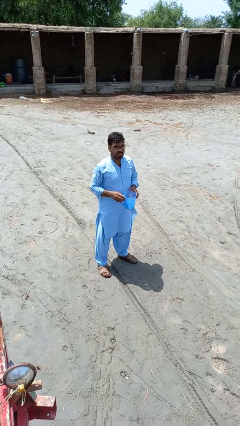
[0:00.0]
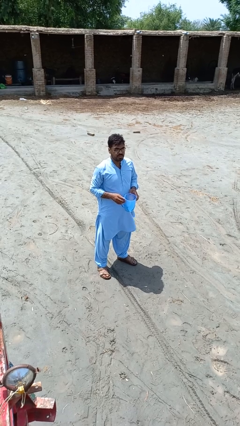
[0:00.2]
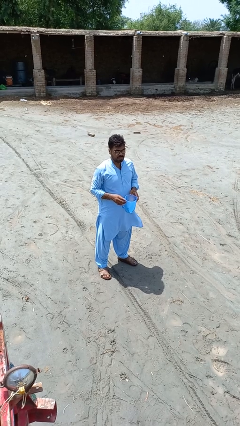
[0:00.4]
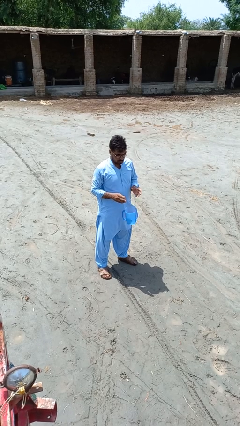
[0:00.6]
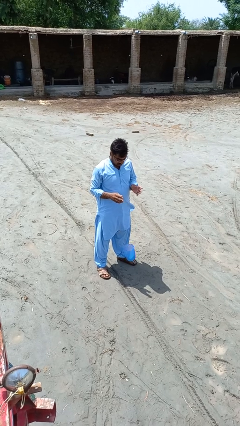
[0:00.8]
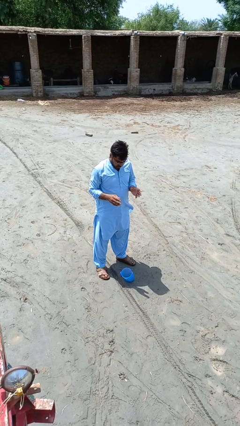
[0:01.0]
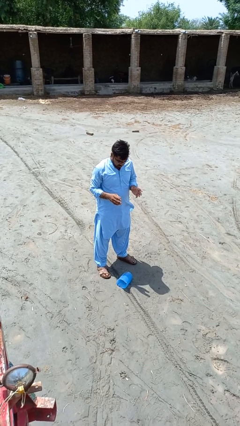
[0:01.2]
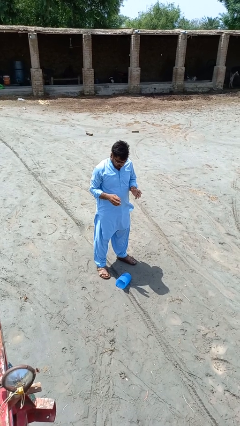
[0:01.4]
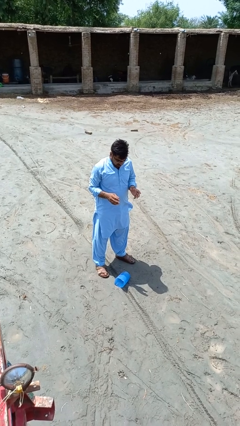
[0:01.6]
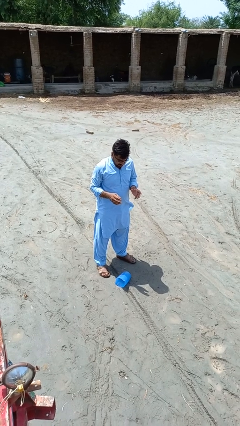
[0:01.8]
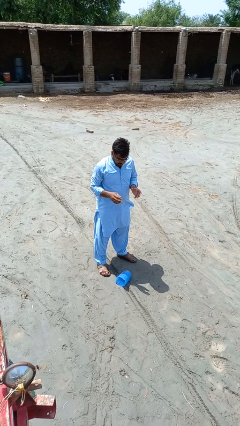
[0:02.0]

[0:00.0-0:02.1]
person drops object

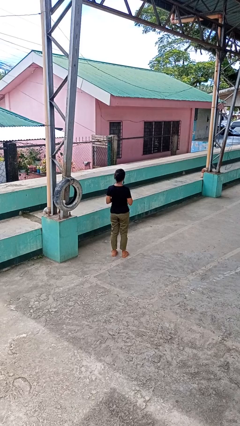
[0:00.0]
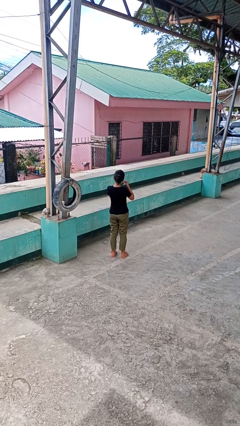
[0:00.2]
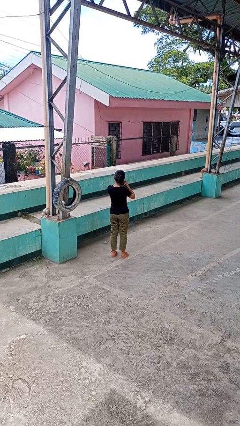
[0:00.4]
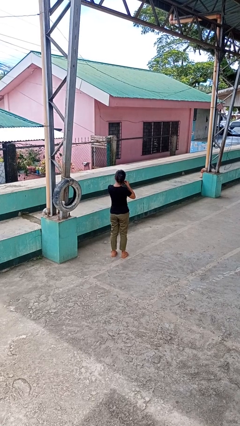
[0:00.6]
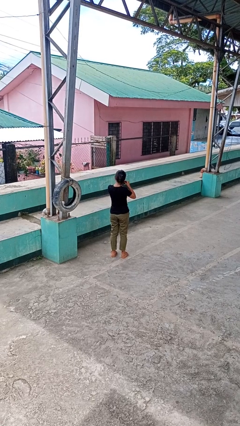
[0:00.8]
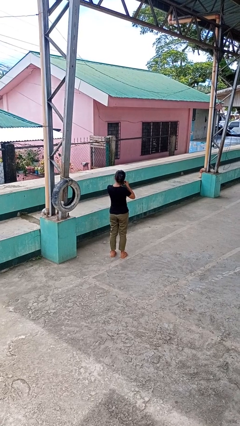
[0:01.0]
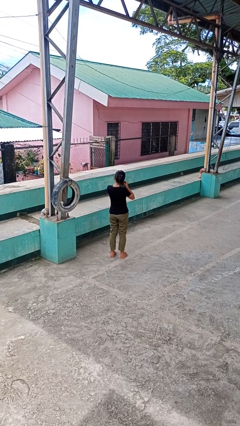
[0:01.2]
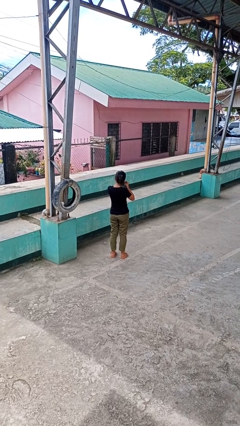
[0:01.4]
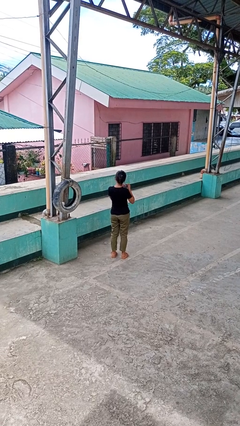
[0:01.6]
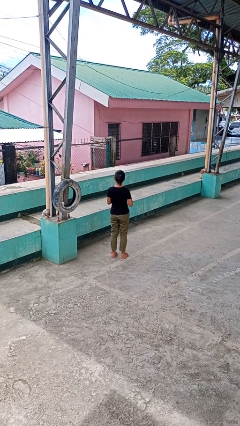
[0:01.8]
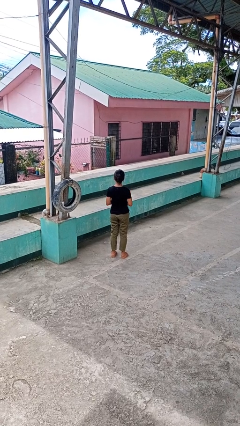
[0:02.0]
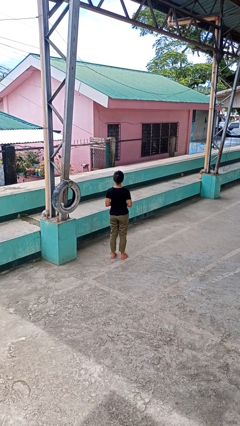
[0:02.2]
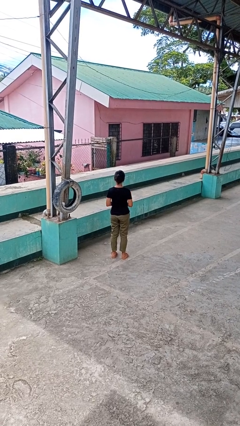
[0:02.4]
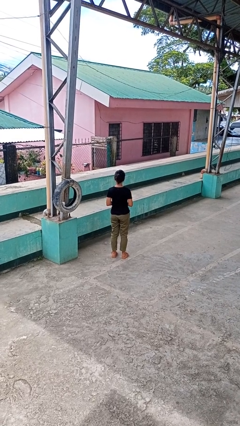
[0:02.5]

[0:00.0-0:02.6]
person takes off earrings

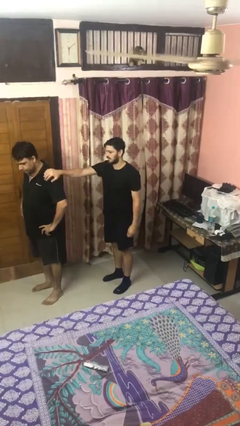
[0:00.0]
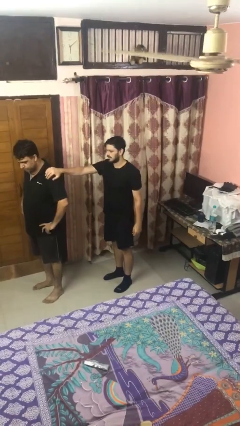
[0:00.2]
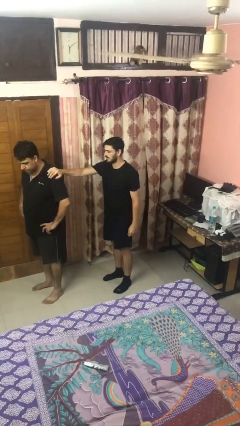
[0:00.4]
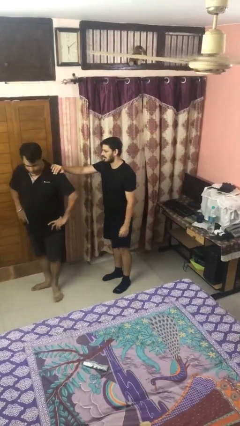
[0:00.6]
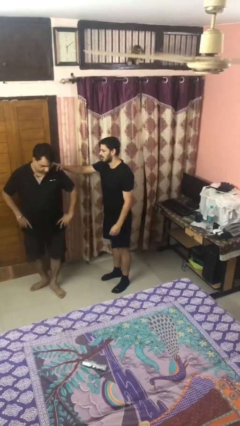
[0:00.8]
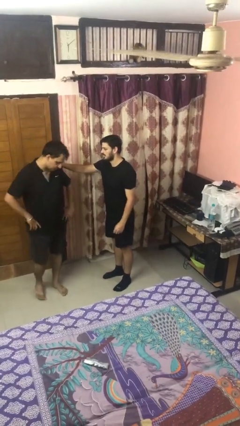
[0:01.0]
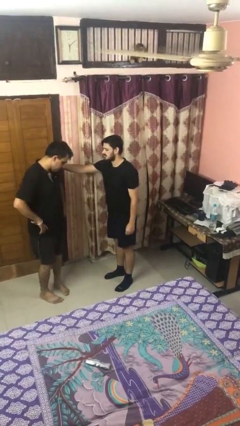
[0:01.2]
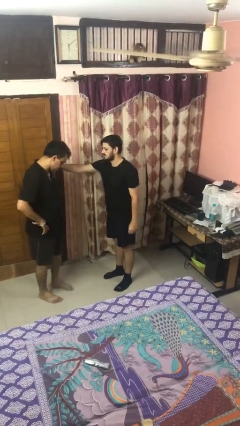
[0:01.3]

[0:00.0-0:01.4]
person spins person around

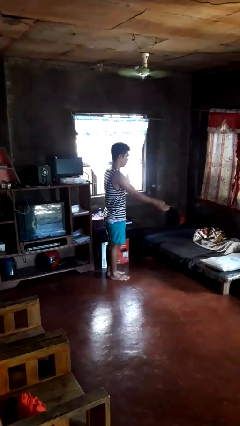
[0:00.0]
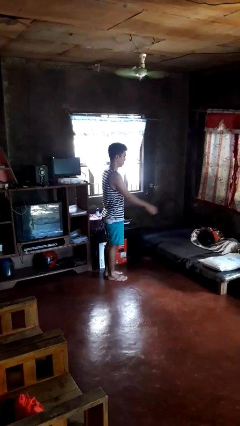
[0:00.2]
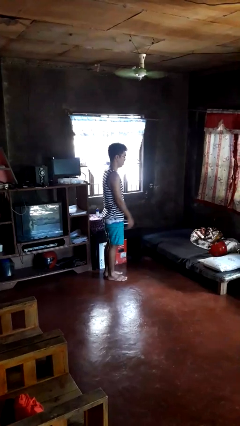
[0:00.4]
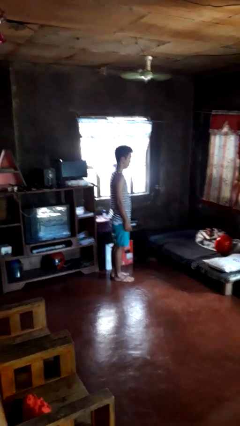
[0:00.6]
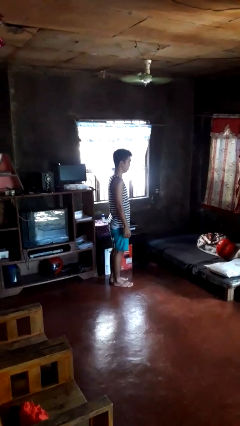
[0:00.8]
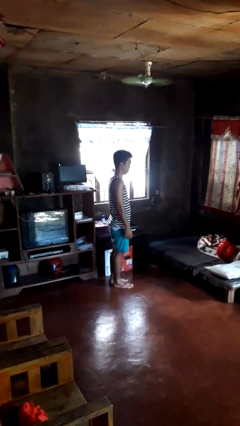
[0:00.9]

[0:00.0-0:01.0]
person throws object on bed

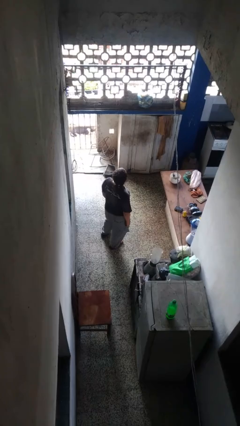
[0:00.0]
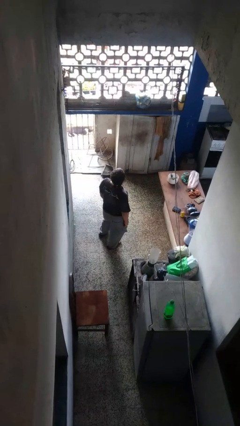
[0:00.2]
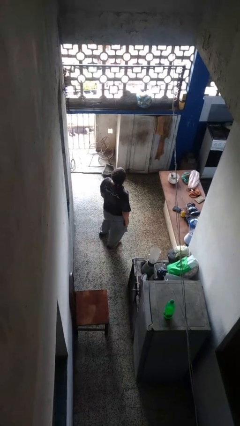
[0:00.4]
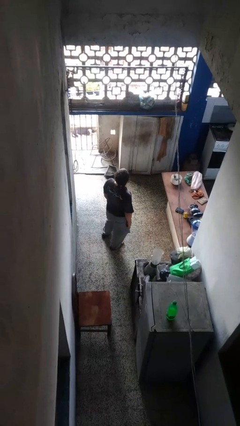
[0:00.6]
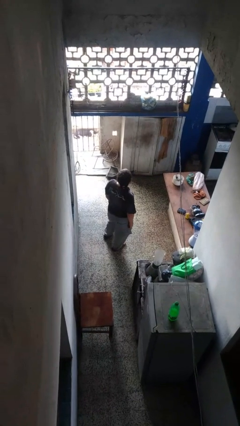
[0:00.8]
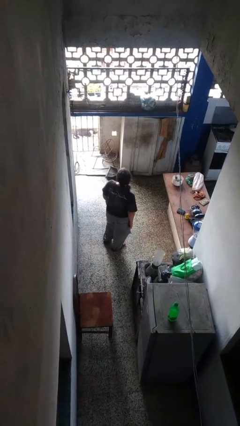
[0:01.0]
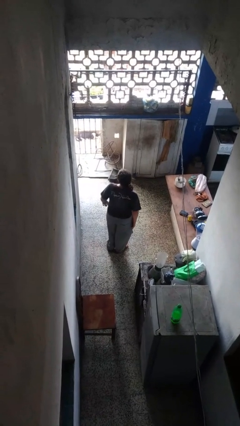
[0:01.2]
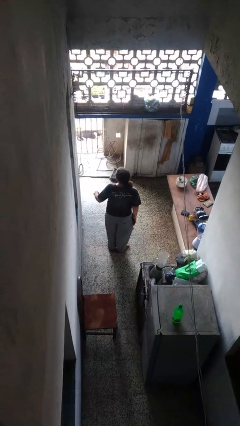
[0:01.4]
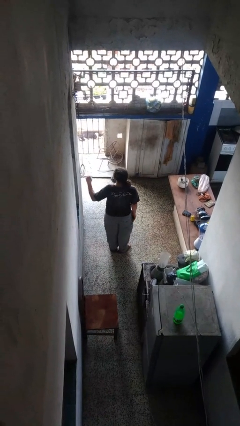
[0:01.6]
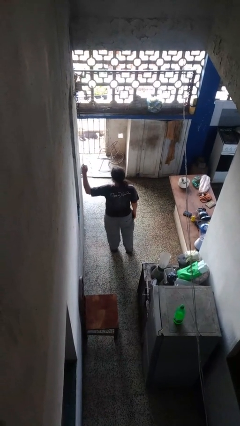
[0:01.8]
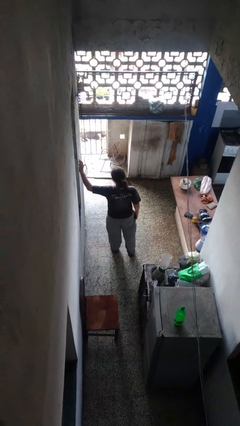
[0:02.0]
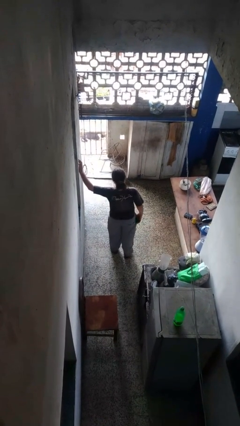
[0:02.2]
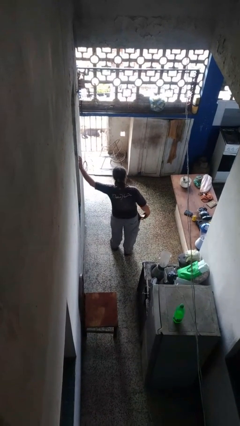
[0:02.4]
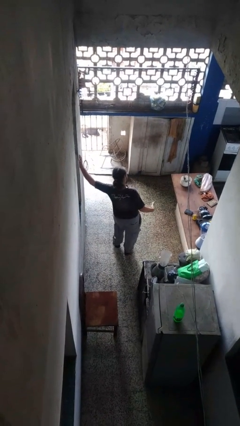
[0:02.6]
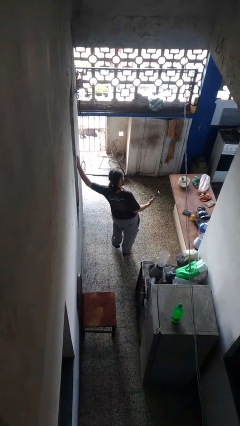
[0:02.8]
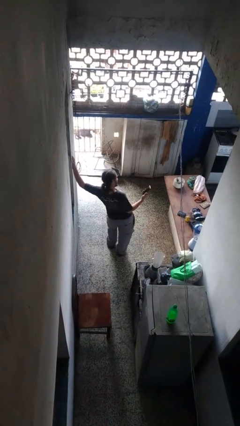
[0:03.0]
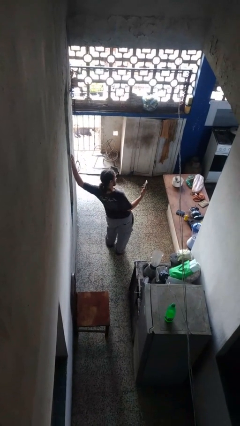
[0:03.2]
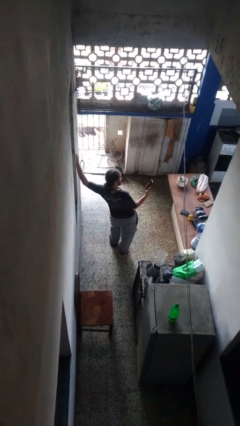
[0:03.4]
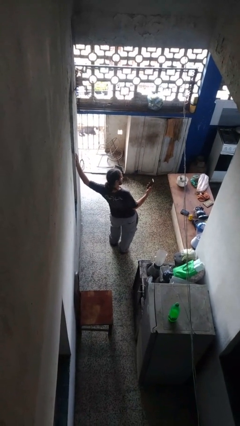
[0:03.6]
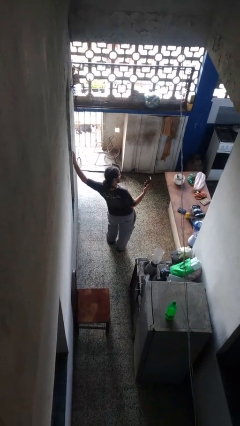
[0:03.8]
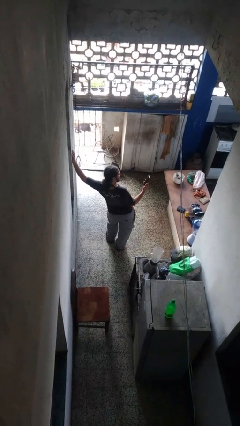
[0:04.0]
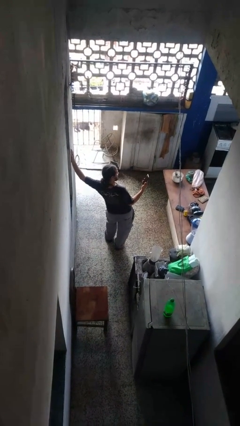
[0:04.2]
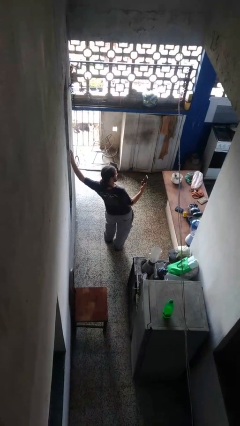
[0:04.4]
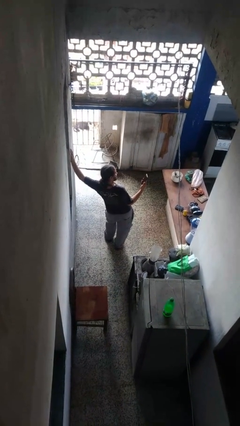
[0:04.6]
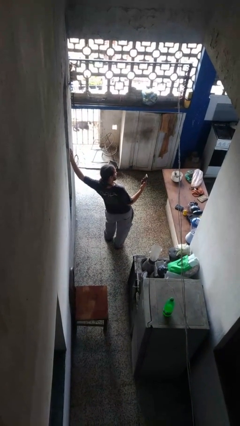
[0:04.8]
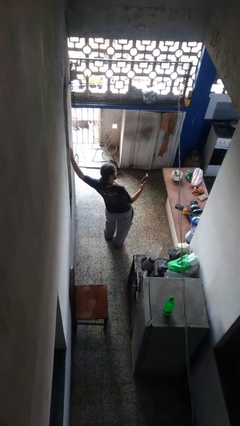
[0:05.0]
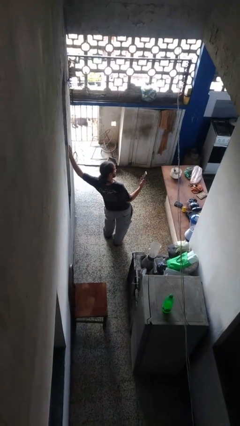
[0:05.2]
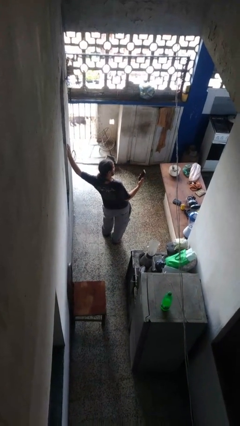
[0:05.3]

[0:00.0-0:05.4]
person takes phone from pocket

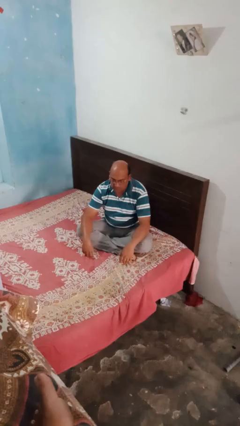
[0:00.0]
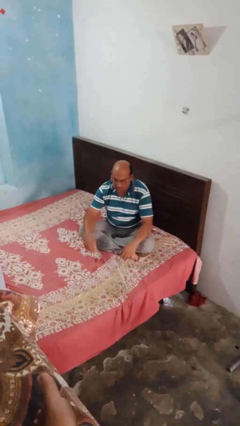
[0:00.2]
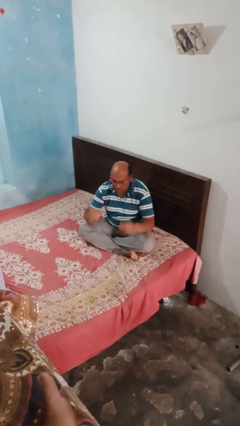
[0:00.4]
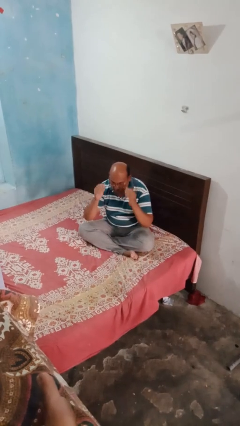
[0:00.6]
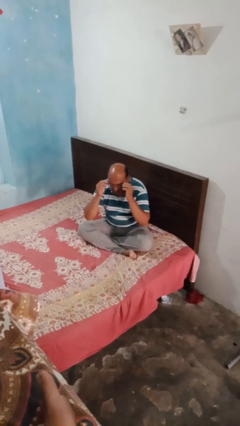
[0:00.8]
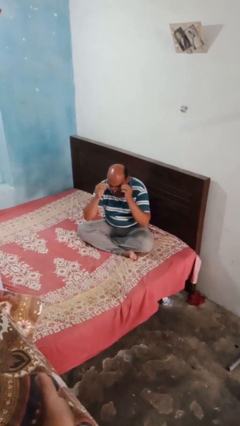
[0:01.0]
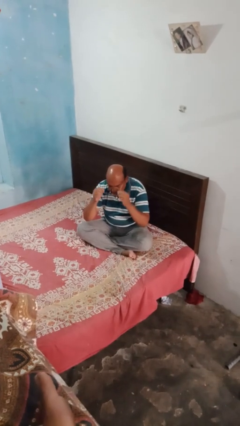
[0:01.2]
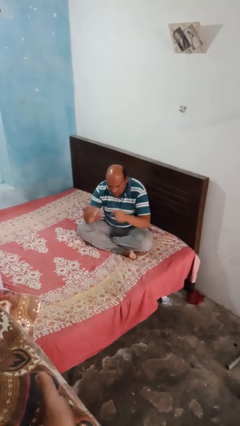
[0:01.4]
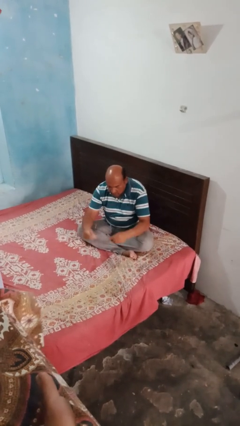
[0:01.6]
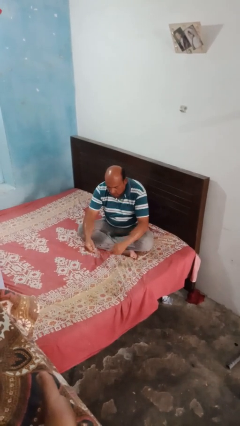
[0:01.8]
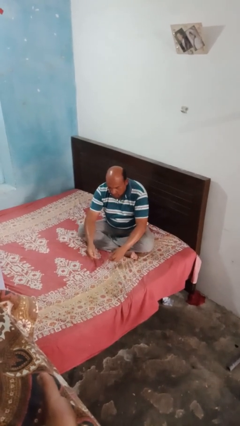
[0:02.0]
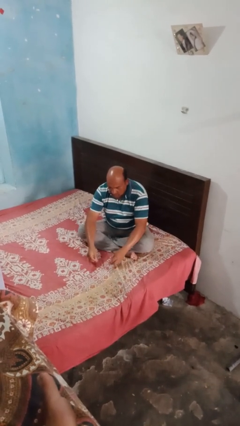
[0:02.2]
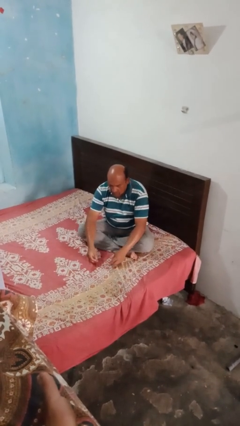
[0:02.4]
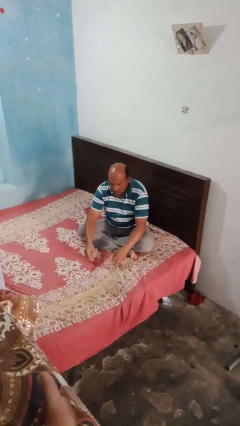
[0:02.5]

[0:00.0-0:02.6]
person takes off glasses

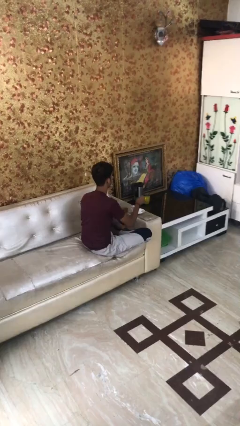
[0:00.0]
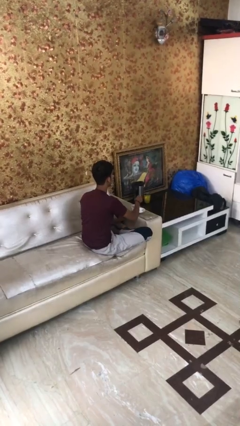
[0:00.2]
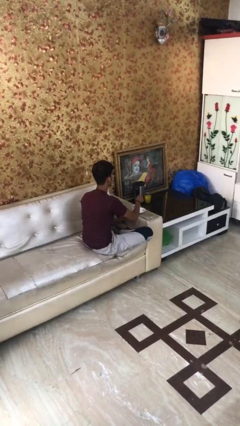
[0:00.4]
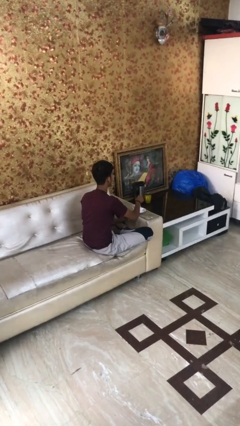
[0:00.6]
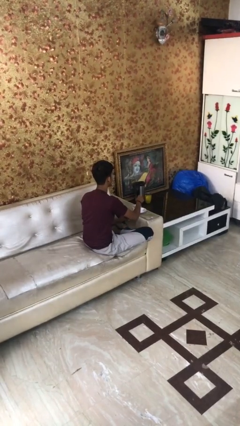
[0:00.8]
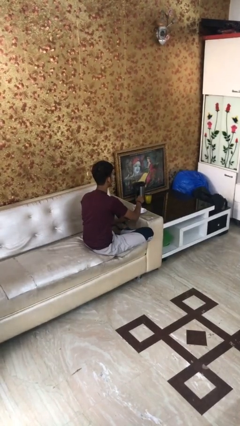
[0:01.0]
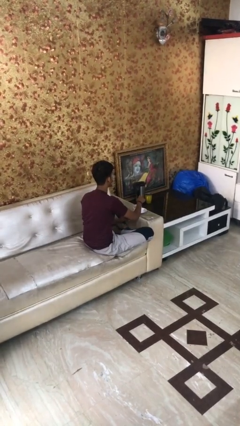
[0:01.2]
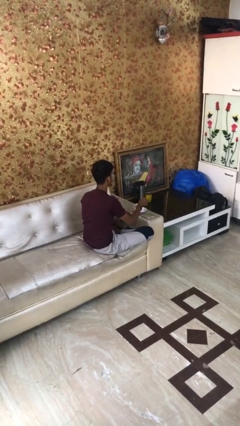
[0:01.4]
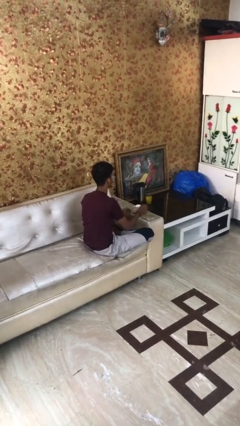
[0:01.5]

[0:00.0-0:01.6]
person stirs mug

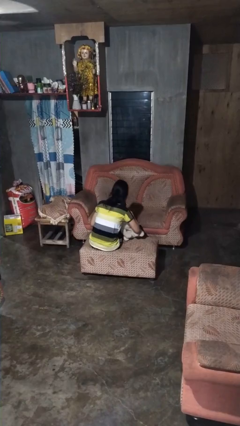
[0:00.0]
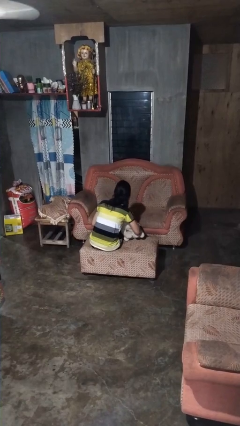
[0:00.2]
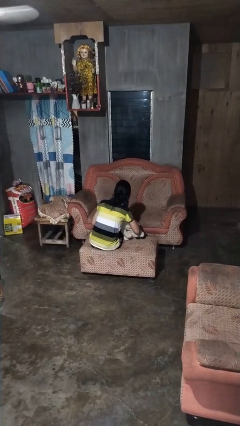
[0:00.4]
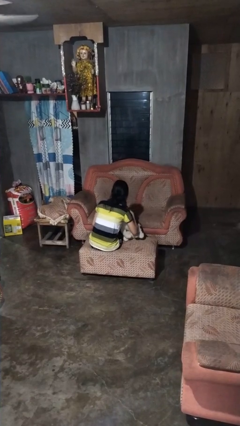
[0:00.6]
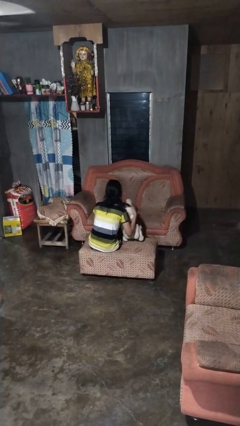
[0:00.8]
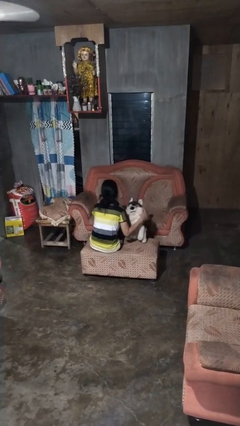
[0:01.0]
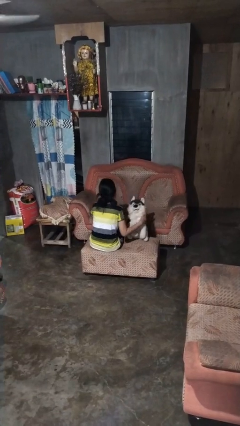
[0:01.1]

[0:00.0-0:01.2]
person hugs stuffed animal
